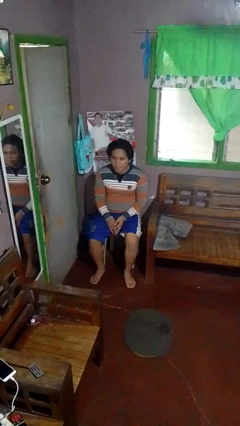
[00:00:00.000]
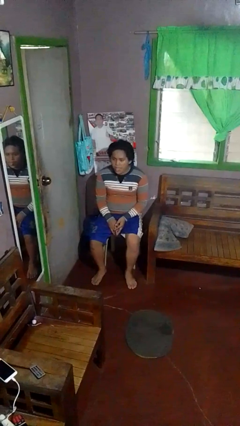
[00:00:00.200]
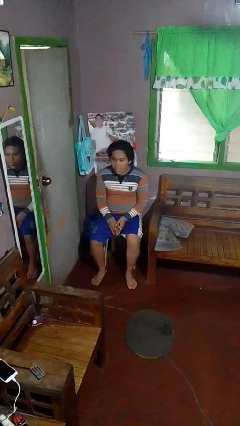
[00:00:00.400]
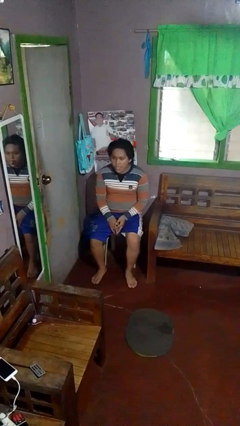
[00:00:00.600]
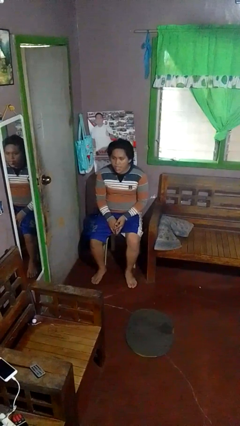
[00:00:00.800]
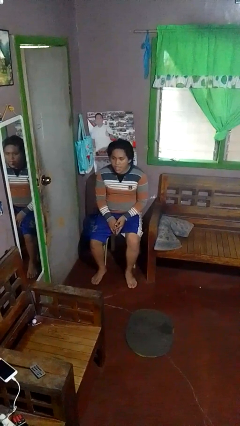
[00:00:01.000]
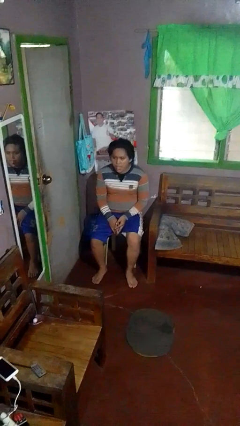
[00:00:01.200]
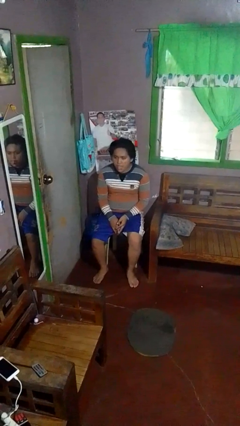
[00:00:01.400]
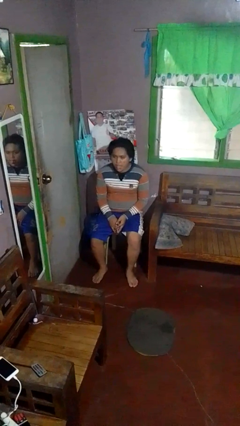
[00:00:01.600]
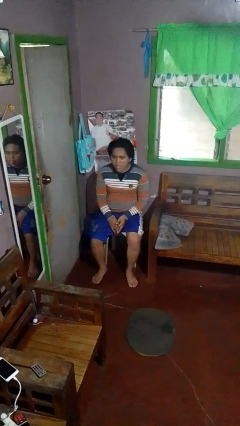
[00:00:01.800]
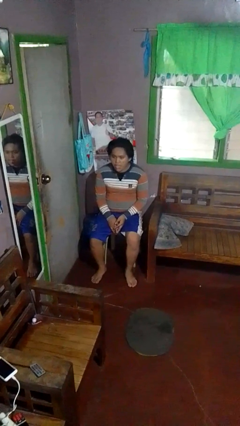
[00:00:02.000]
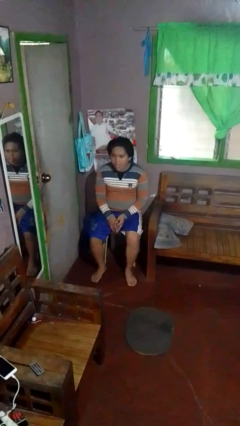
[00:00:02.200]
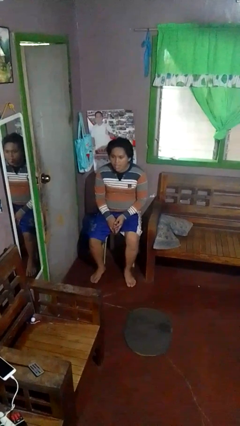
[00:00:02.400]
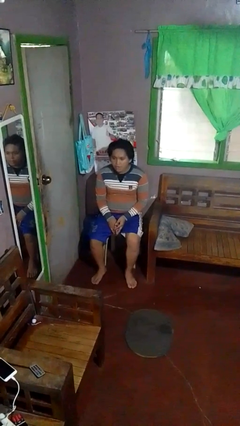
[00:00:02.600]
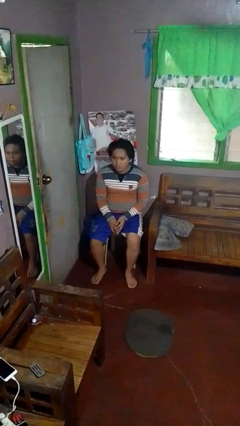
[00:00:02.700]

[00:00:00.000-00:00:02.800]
person sticks out tongue

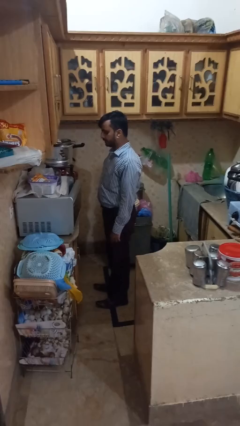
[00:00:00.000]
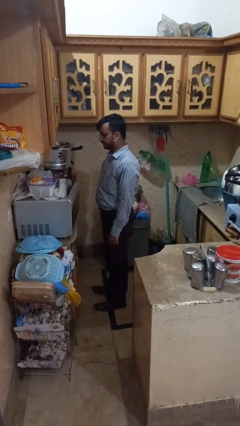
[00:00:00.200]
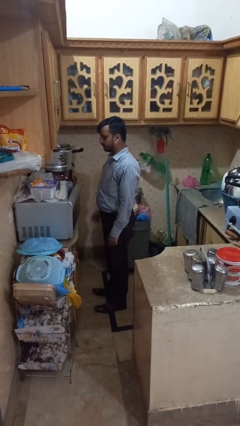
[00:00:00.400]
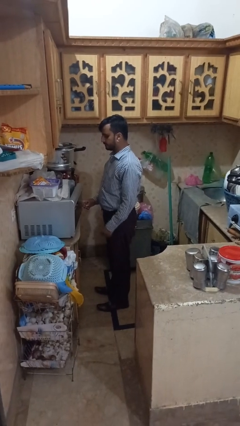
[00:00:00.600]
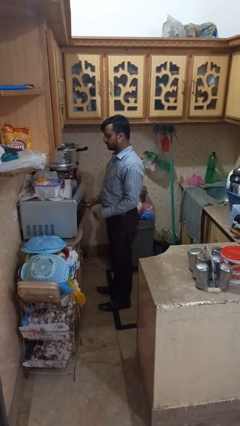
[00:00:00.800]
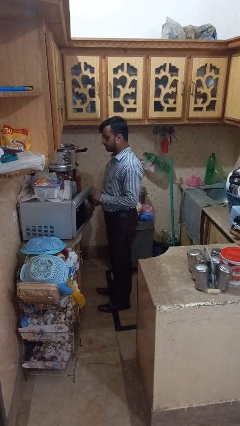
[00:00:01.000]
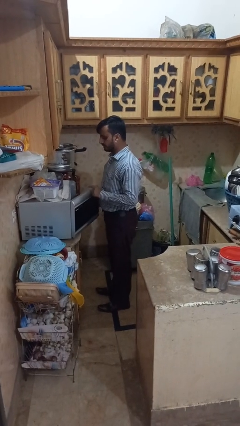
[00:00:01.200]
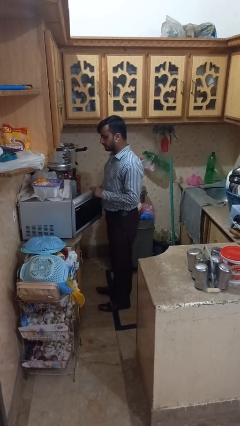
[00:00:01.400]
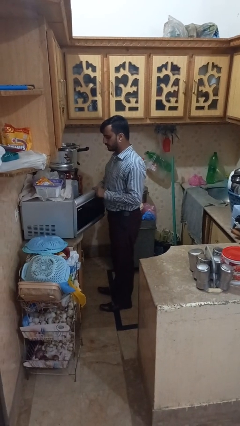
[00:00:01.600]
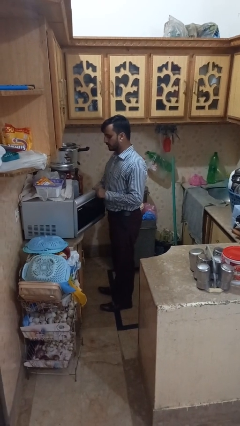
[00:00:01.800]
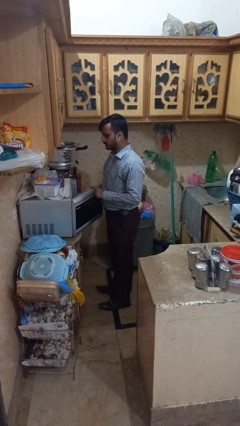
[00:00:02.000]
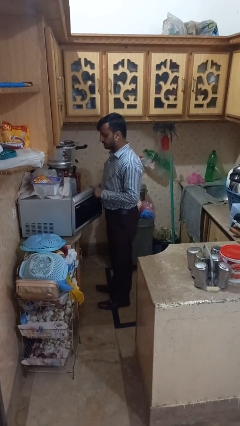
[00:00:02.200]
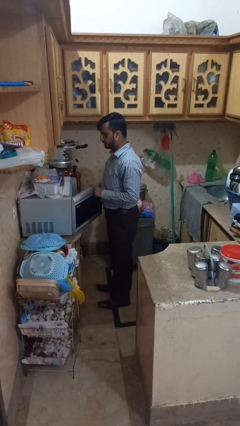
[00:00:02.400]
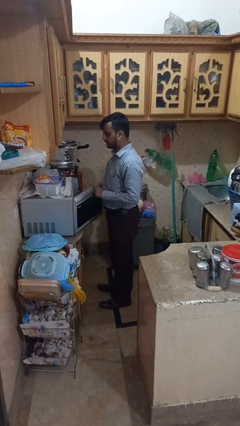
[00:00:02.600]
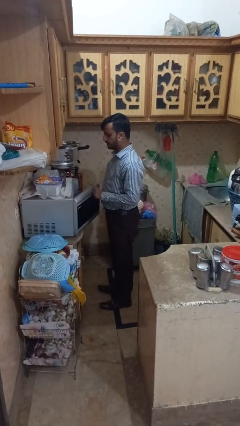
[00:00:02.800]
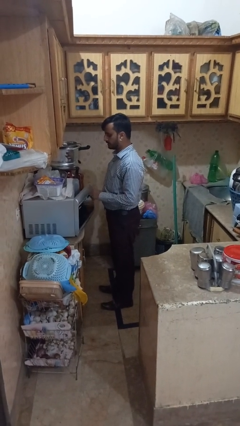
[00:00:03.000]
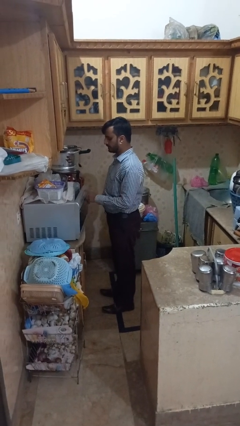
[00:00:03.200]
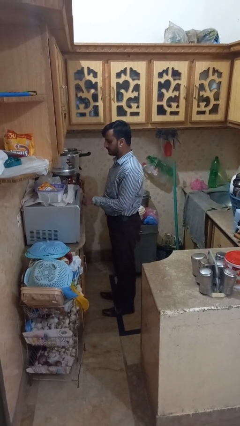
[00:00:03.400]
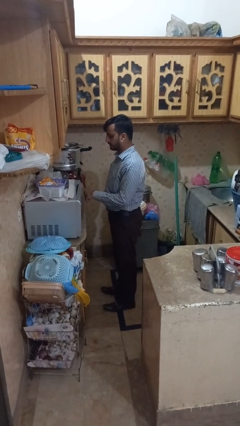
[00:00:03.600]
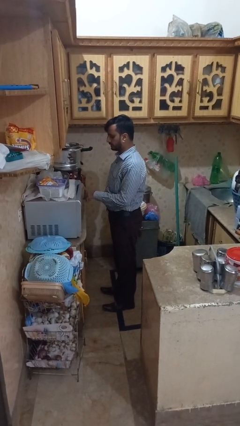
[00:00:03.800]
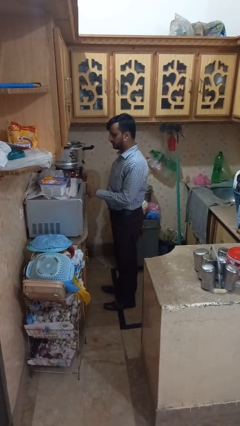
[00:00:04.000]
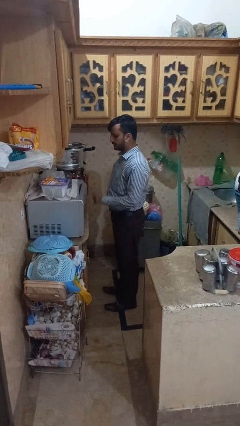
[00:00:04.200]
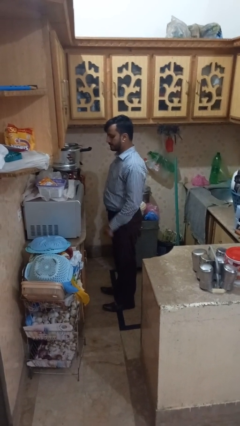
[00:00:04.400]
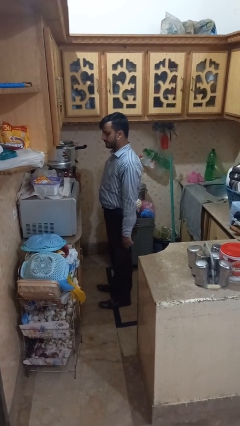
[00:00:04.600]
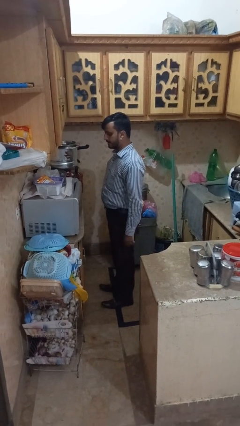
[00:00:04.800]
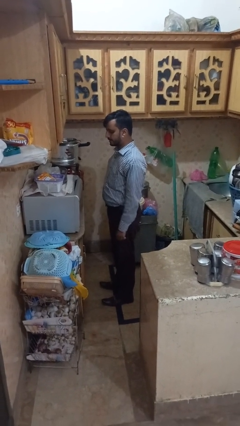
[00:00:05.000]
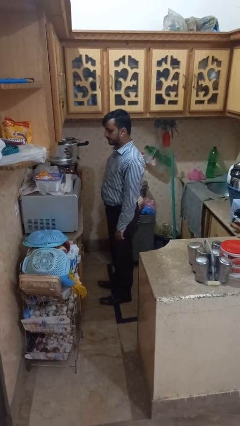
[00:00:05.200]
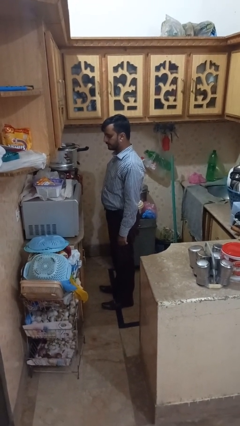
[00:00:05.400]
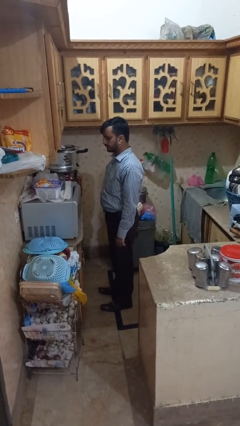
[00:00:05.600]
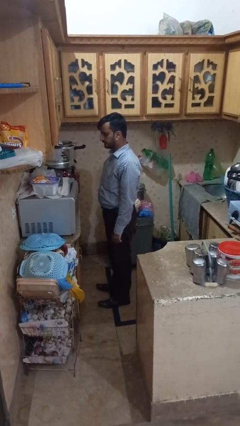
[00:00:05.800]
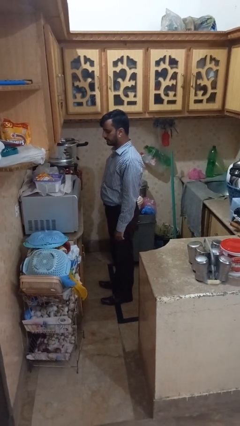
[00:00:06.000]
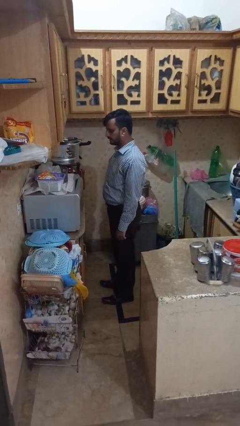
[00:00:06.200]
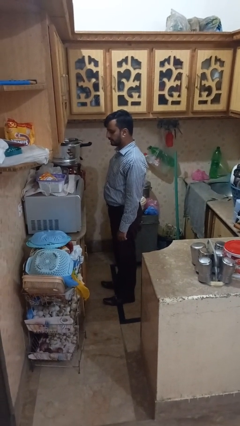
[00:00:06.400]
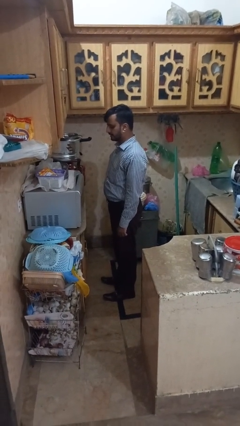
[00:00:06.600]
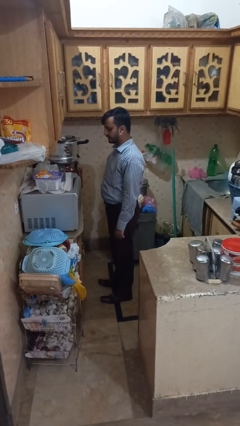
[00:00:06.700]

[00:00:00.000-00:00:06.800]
person takes object from microwave

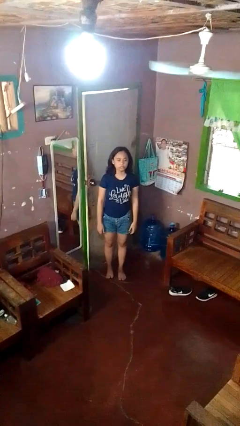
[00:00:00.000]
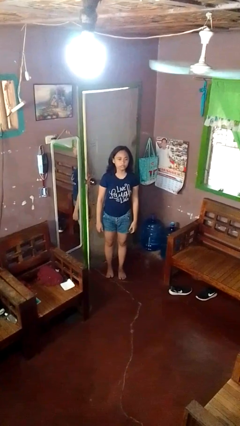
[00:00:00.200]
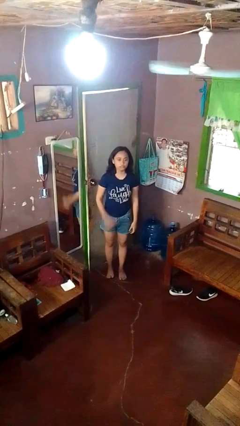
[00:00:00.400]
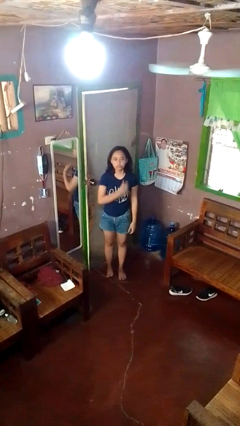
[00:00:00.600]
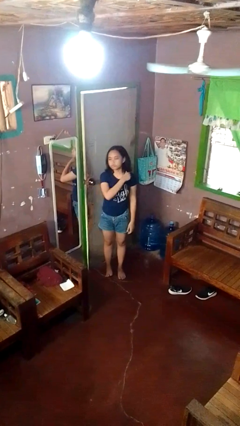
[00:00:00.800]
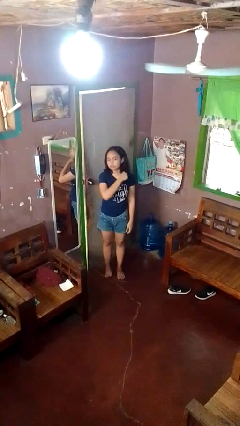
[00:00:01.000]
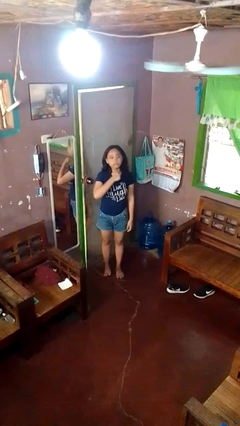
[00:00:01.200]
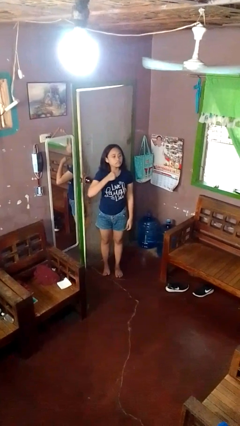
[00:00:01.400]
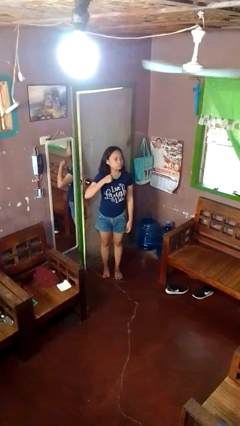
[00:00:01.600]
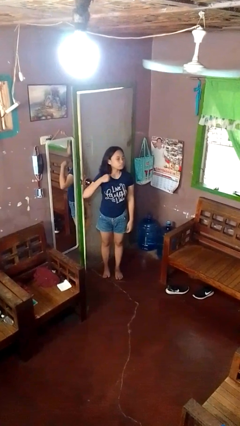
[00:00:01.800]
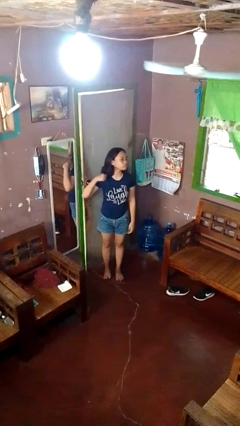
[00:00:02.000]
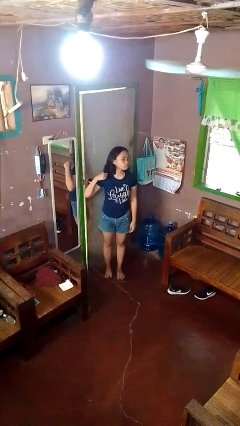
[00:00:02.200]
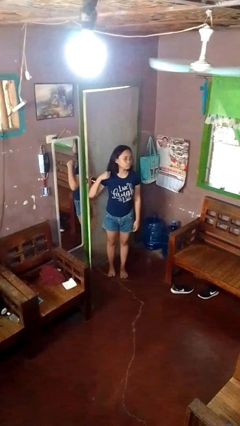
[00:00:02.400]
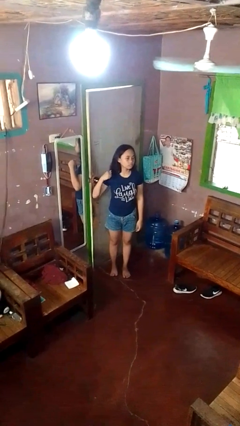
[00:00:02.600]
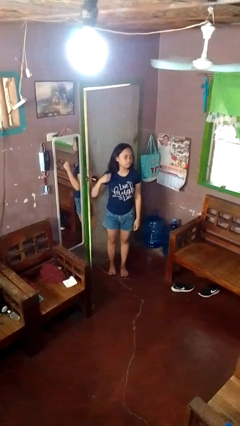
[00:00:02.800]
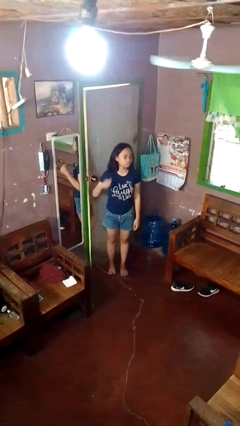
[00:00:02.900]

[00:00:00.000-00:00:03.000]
person gestures cut

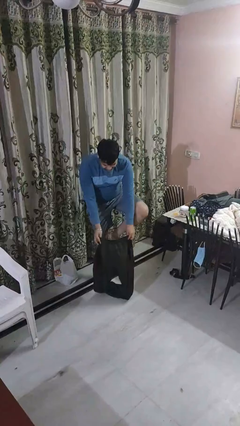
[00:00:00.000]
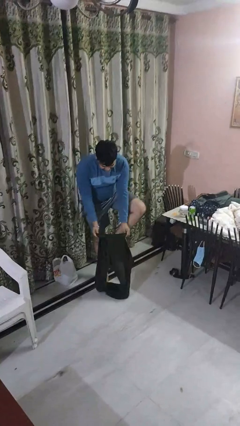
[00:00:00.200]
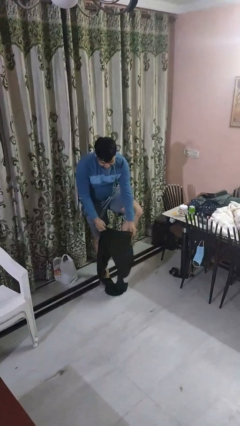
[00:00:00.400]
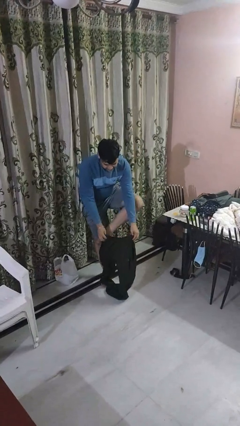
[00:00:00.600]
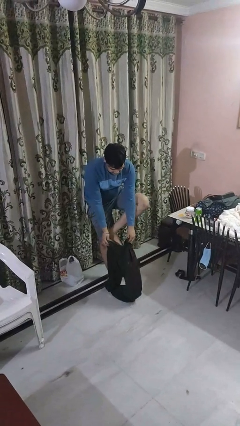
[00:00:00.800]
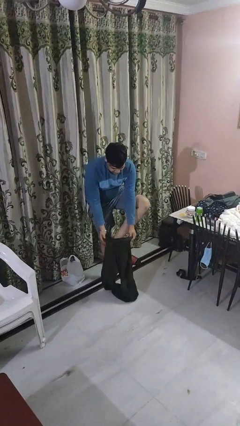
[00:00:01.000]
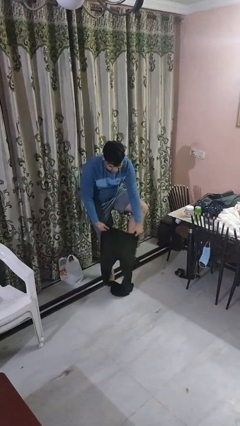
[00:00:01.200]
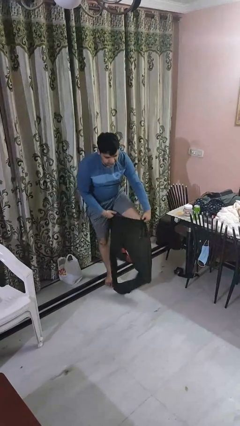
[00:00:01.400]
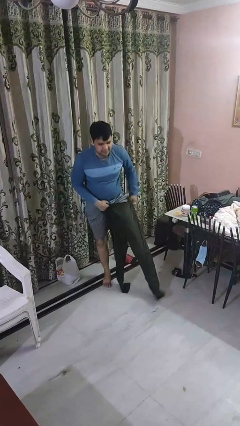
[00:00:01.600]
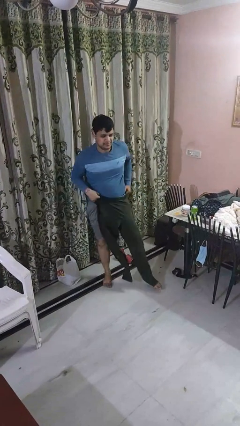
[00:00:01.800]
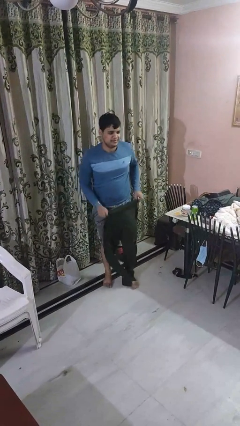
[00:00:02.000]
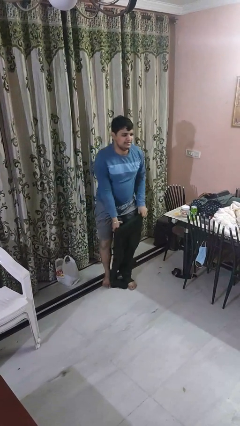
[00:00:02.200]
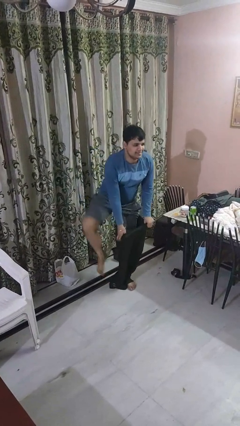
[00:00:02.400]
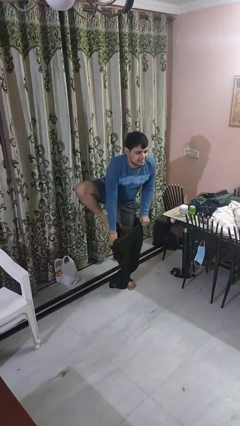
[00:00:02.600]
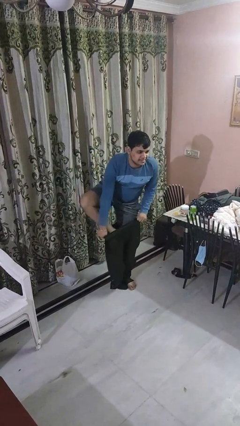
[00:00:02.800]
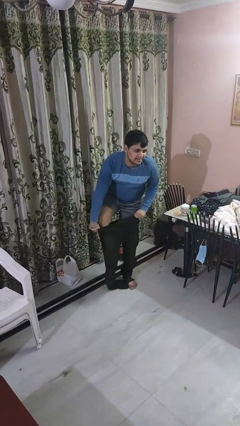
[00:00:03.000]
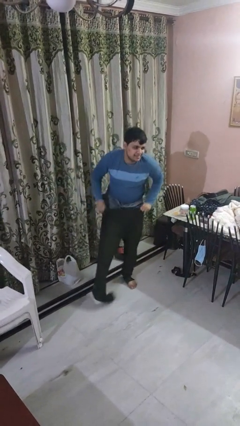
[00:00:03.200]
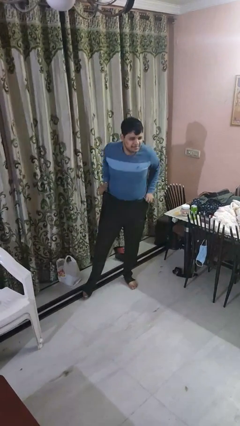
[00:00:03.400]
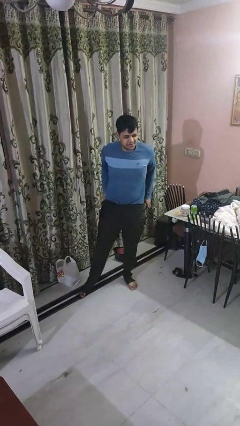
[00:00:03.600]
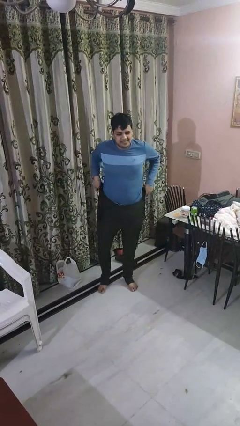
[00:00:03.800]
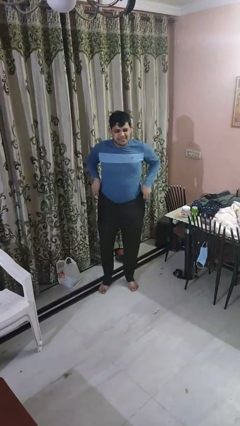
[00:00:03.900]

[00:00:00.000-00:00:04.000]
person puts on pants

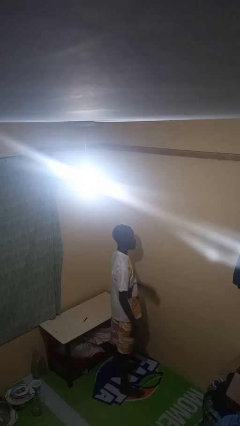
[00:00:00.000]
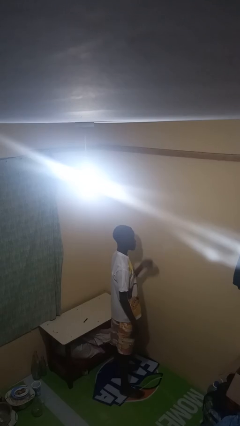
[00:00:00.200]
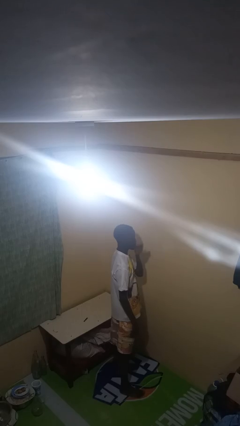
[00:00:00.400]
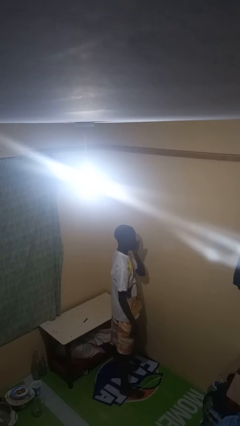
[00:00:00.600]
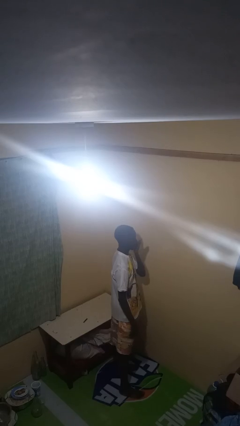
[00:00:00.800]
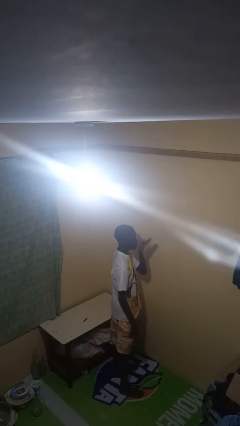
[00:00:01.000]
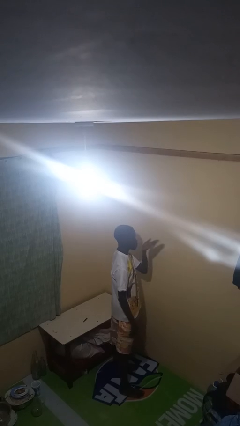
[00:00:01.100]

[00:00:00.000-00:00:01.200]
person gestures blow kiss
